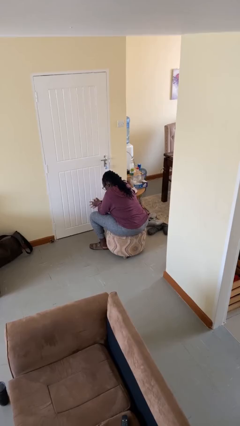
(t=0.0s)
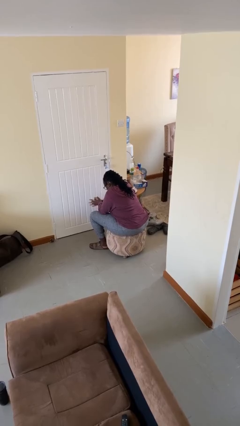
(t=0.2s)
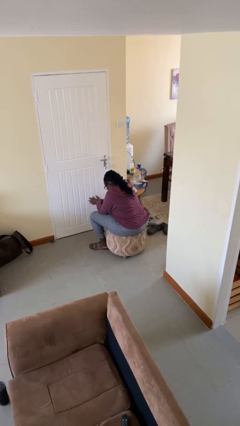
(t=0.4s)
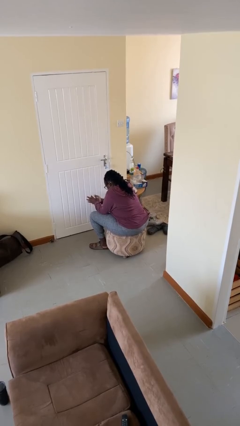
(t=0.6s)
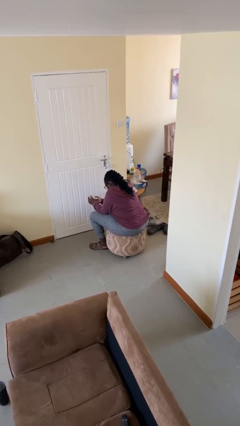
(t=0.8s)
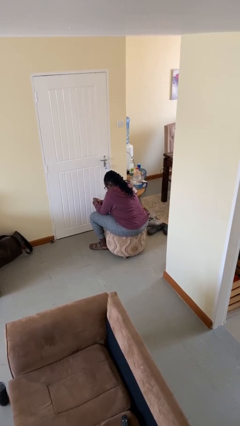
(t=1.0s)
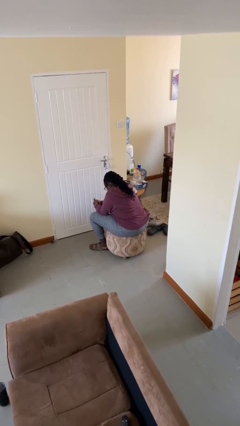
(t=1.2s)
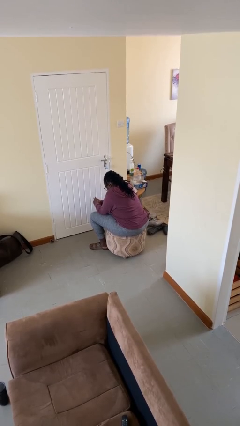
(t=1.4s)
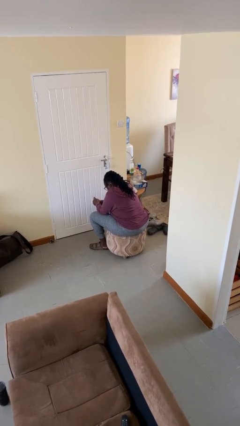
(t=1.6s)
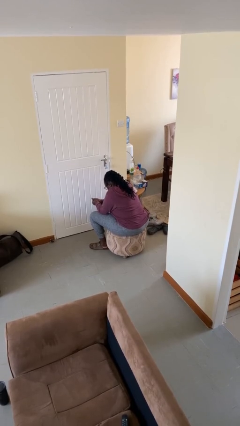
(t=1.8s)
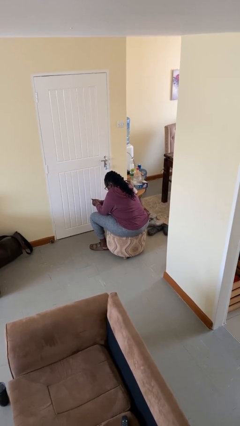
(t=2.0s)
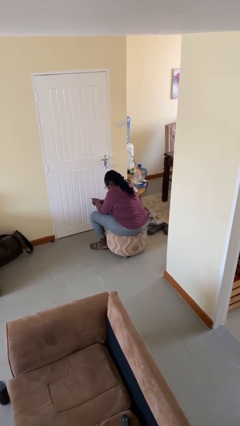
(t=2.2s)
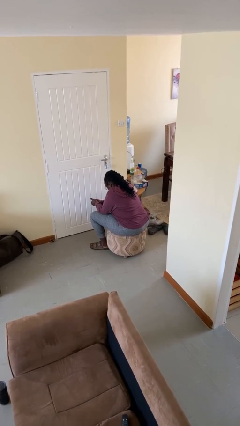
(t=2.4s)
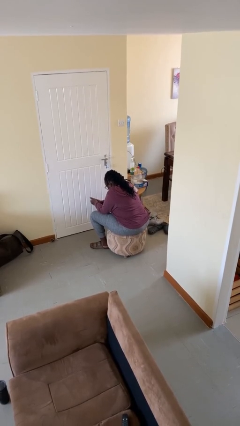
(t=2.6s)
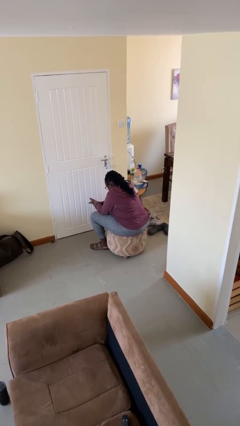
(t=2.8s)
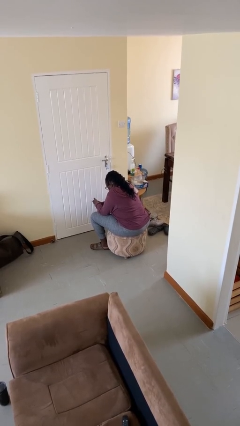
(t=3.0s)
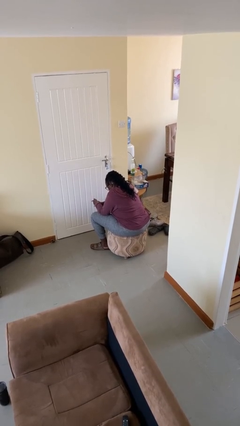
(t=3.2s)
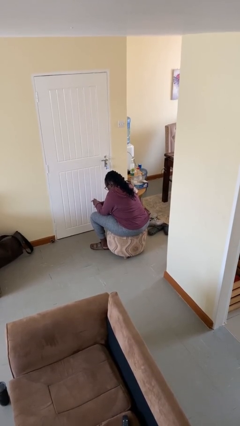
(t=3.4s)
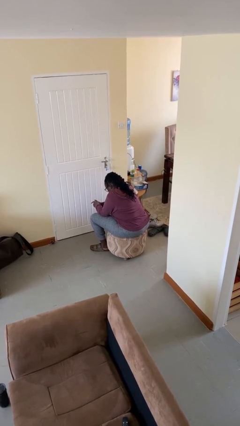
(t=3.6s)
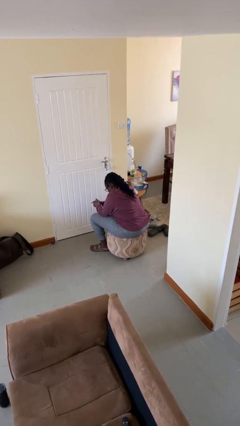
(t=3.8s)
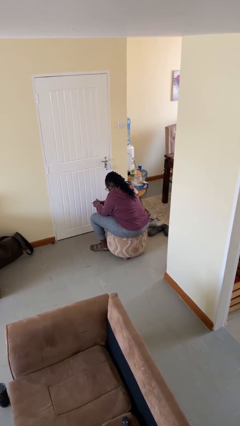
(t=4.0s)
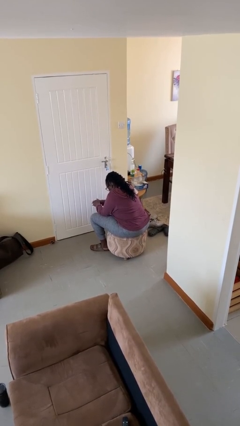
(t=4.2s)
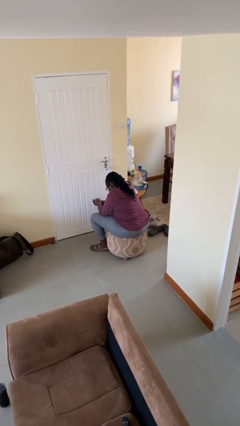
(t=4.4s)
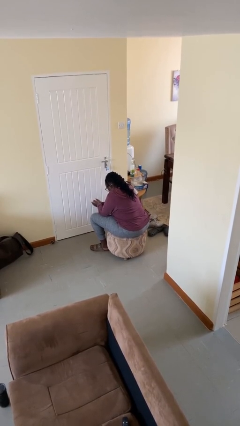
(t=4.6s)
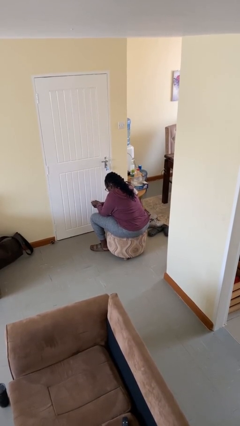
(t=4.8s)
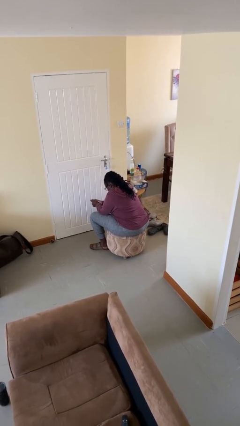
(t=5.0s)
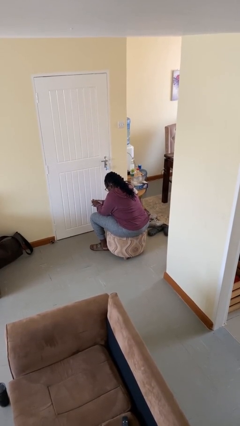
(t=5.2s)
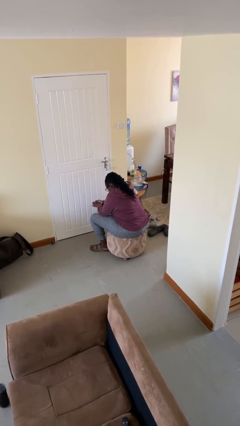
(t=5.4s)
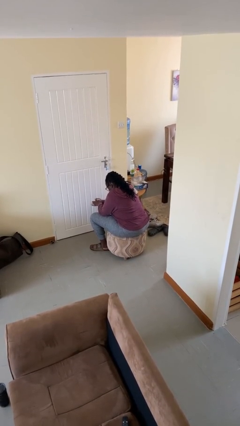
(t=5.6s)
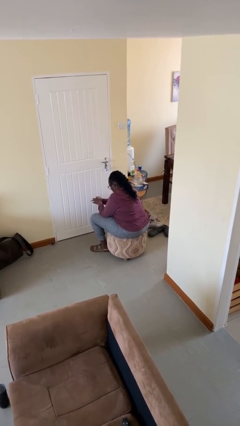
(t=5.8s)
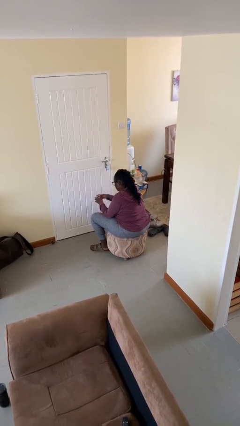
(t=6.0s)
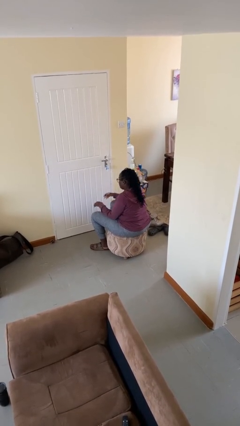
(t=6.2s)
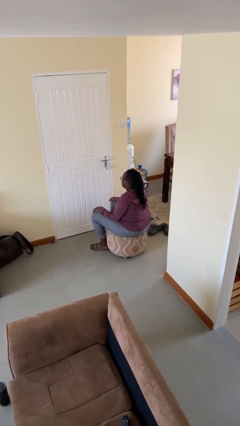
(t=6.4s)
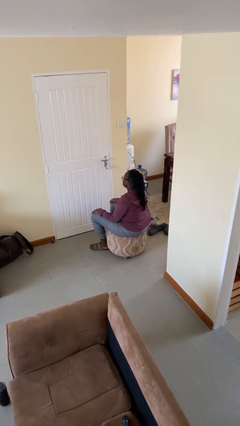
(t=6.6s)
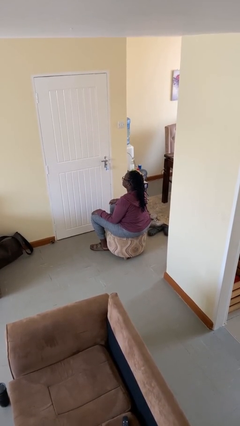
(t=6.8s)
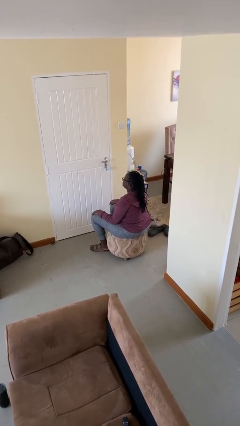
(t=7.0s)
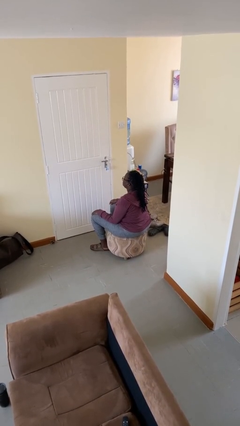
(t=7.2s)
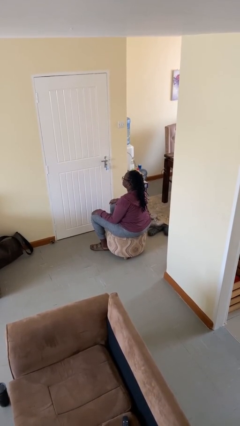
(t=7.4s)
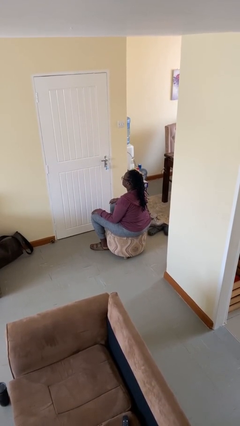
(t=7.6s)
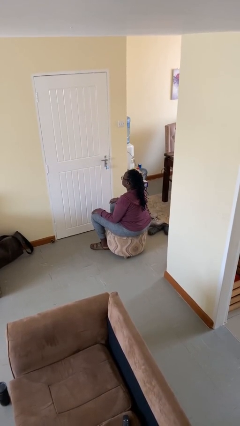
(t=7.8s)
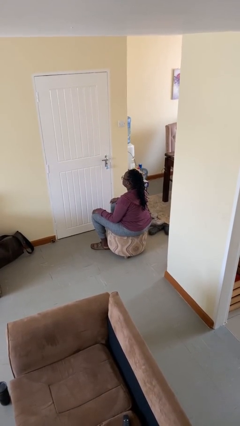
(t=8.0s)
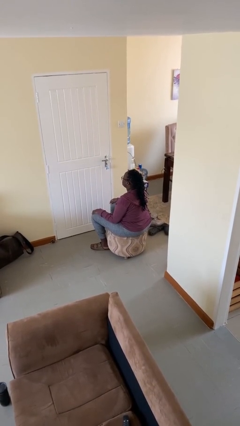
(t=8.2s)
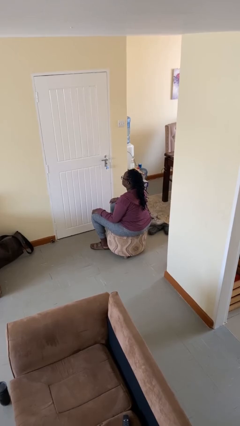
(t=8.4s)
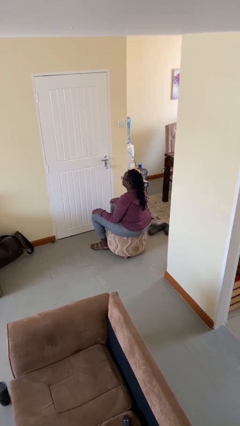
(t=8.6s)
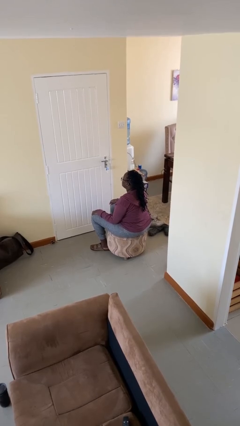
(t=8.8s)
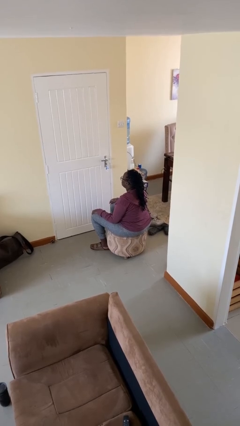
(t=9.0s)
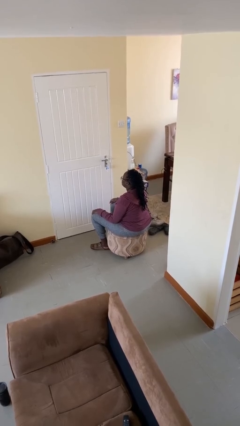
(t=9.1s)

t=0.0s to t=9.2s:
person looks at hands in lap

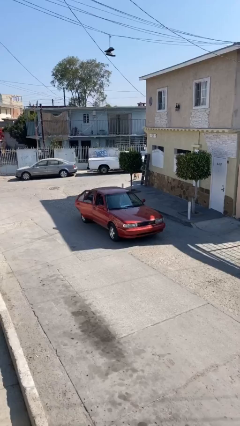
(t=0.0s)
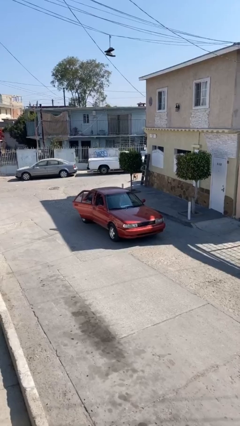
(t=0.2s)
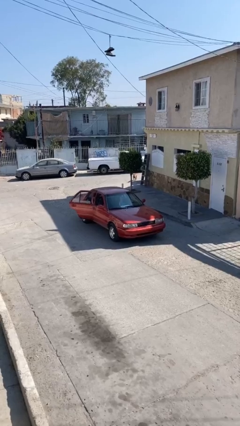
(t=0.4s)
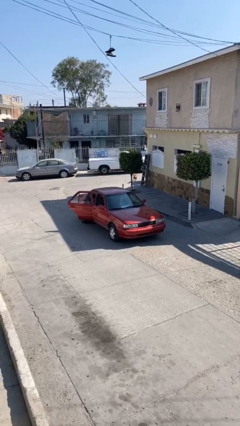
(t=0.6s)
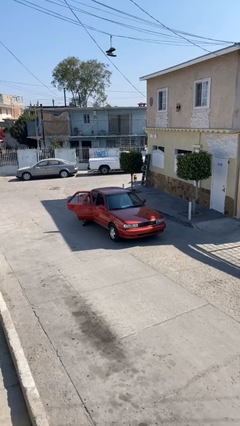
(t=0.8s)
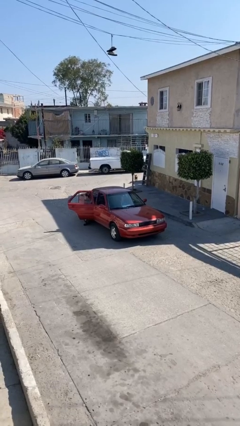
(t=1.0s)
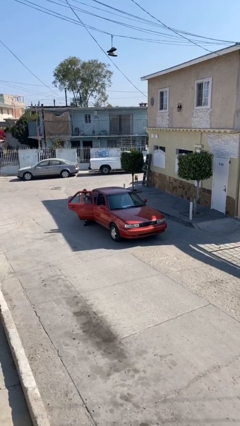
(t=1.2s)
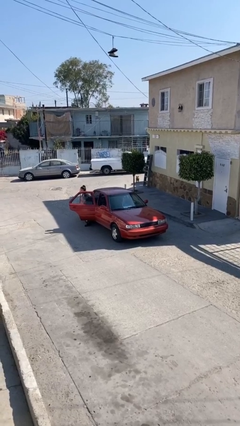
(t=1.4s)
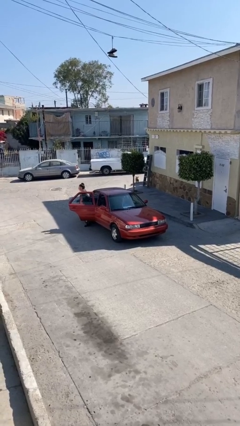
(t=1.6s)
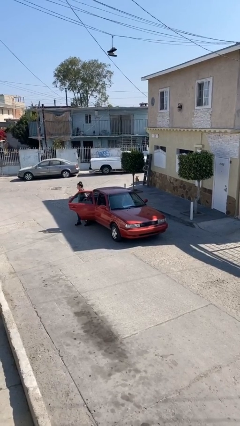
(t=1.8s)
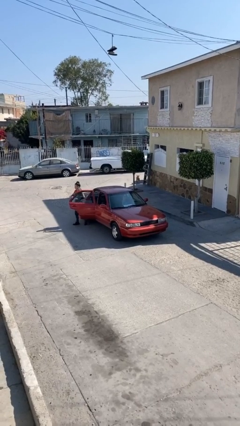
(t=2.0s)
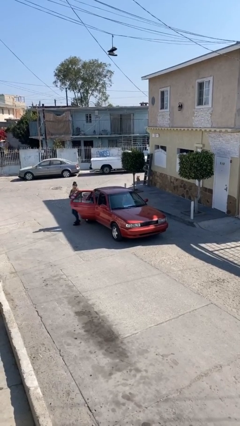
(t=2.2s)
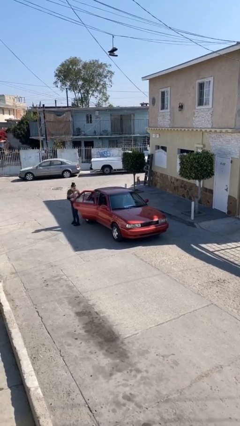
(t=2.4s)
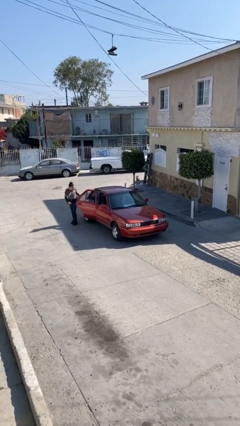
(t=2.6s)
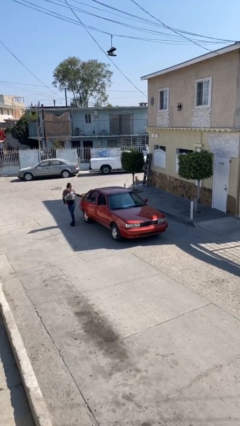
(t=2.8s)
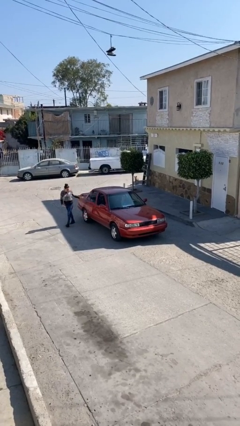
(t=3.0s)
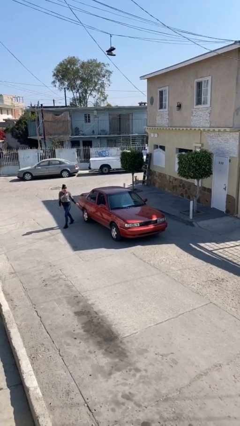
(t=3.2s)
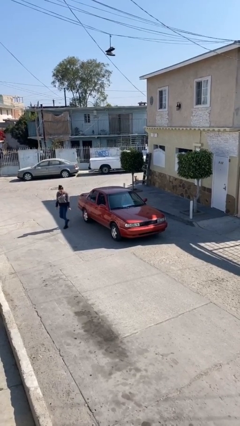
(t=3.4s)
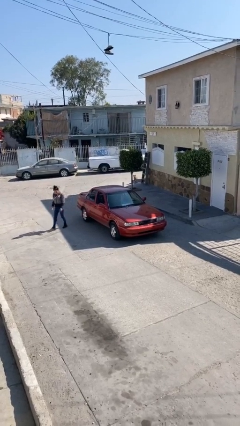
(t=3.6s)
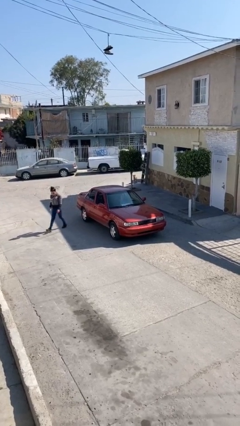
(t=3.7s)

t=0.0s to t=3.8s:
car drops off person

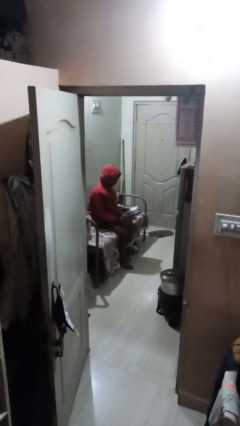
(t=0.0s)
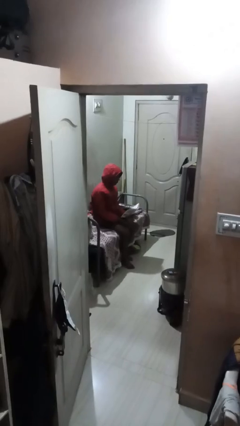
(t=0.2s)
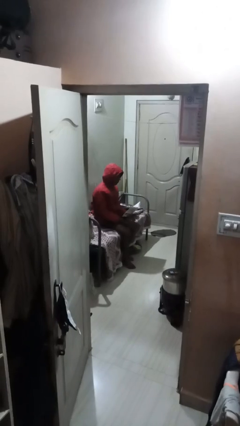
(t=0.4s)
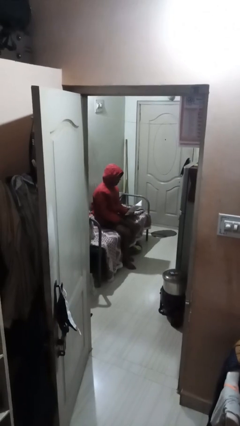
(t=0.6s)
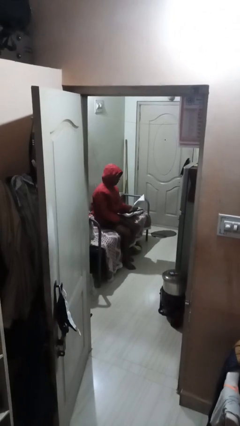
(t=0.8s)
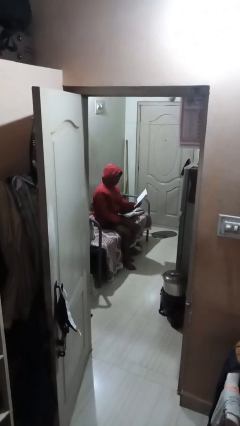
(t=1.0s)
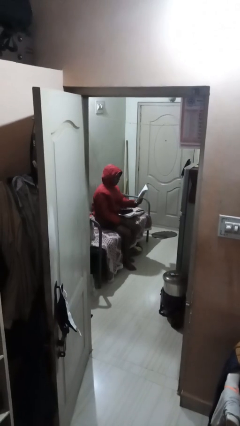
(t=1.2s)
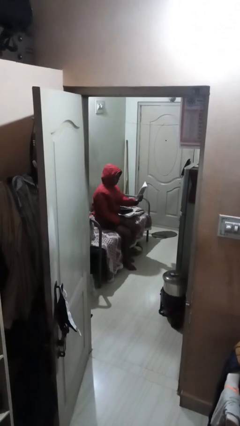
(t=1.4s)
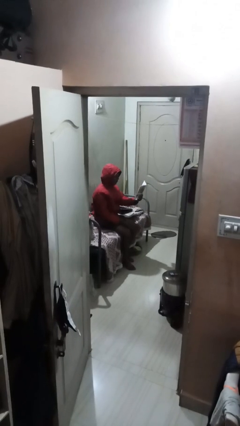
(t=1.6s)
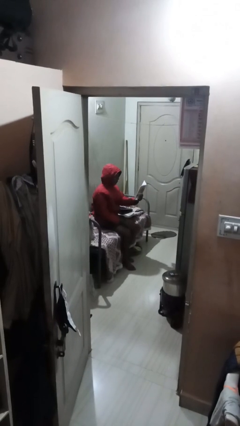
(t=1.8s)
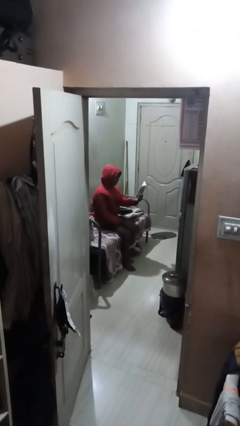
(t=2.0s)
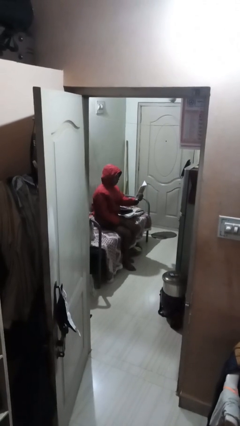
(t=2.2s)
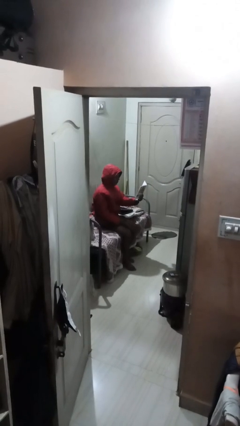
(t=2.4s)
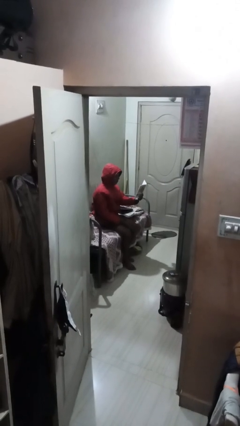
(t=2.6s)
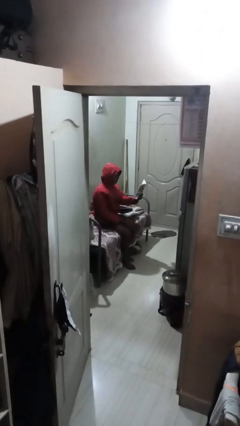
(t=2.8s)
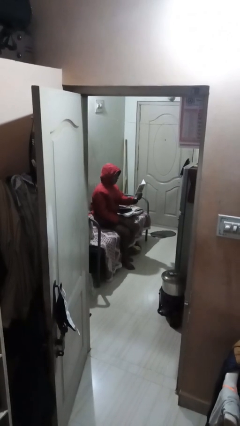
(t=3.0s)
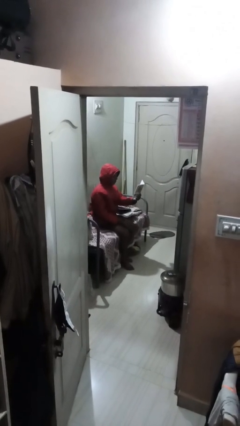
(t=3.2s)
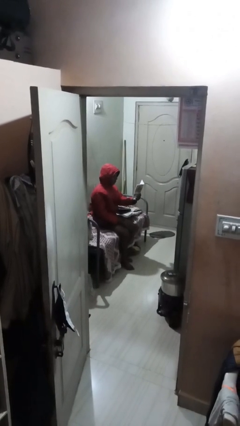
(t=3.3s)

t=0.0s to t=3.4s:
person reads document

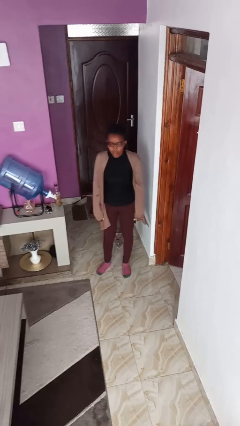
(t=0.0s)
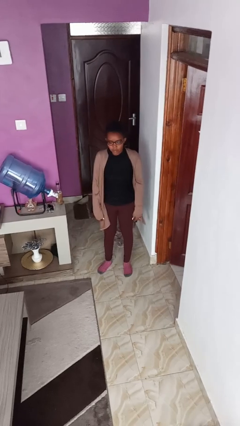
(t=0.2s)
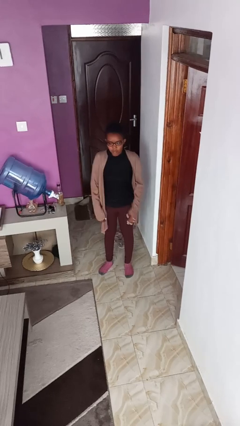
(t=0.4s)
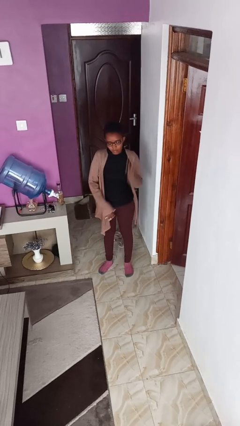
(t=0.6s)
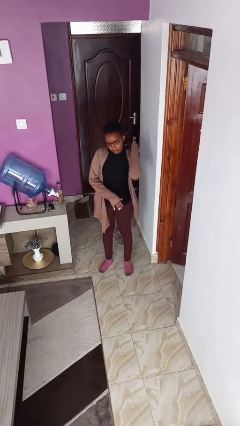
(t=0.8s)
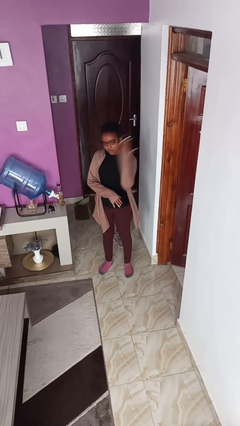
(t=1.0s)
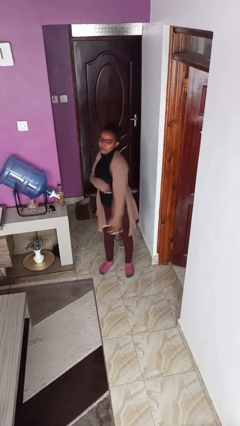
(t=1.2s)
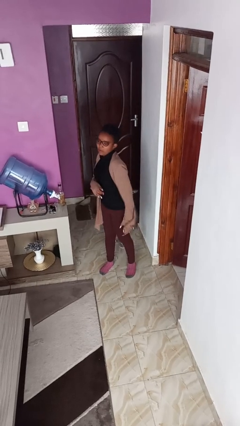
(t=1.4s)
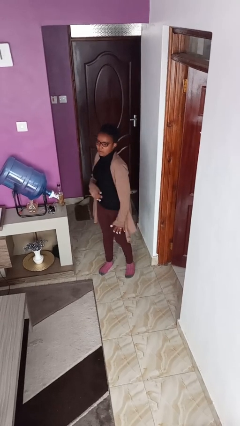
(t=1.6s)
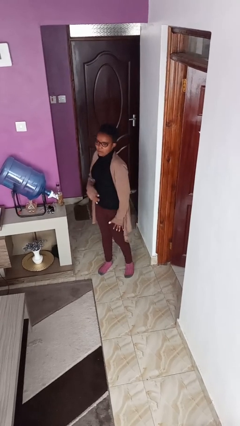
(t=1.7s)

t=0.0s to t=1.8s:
person karate chop
